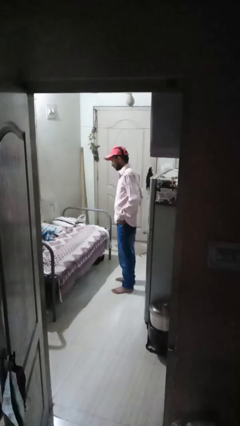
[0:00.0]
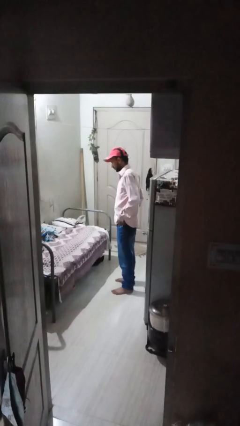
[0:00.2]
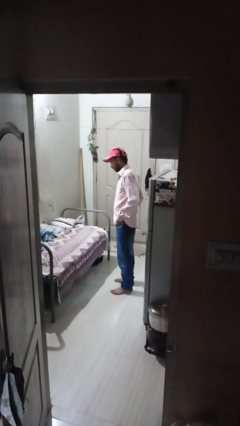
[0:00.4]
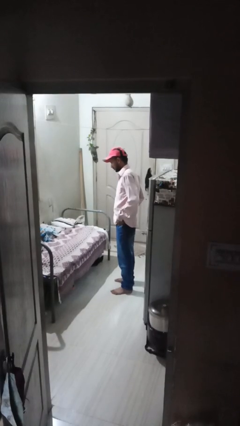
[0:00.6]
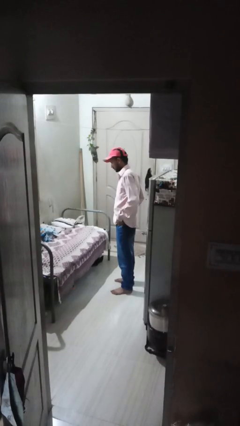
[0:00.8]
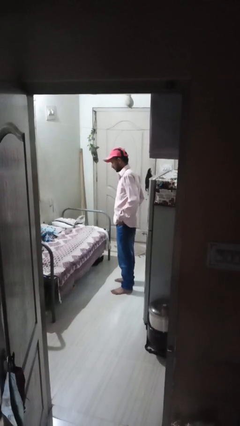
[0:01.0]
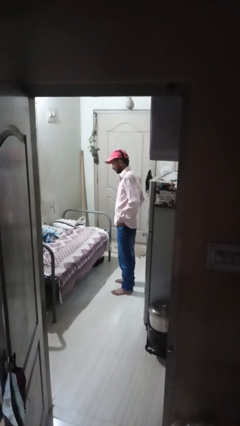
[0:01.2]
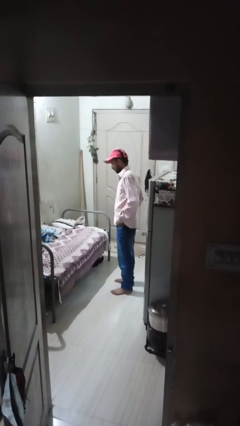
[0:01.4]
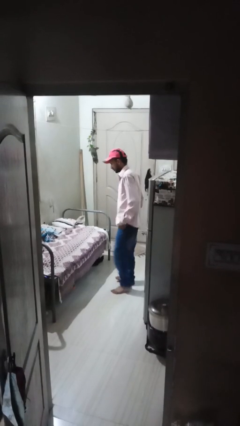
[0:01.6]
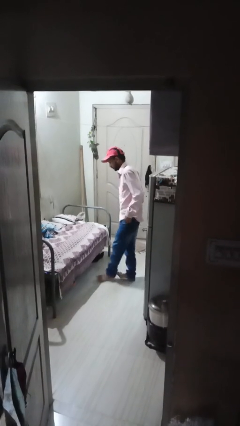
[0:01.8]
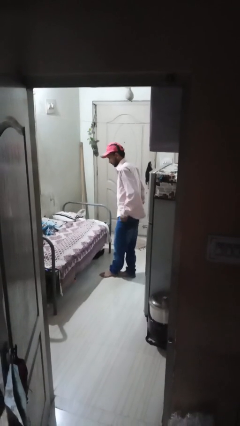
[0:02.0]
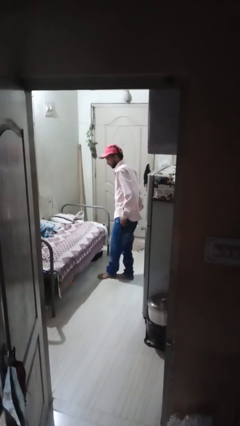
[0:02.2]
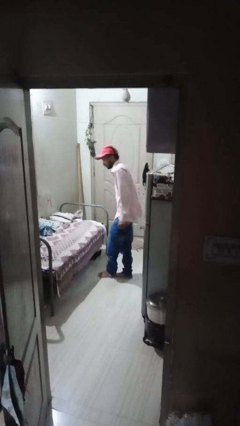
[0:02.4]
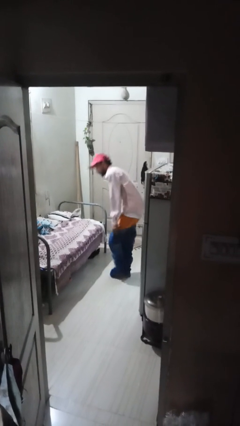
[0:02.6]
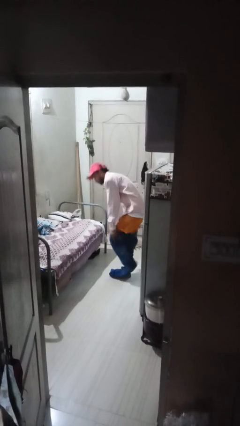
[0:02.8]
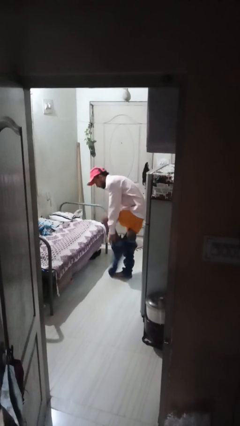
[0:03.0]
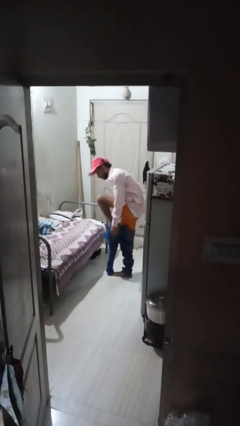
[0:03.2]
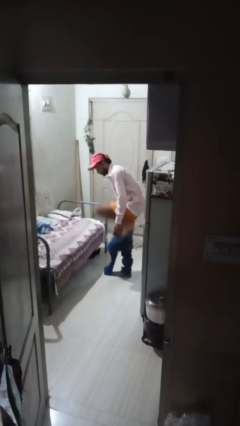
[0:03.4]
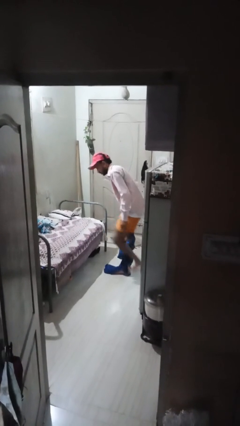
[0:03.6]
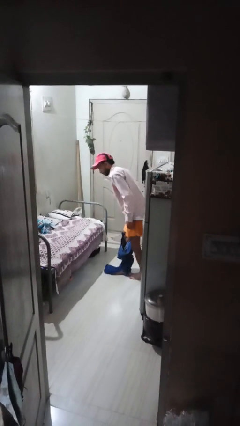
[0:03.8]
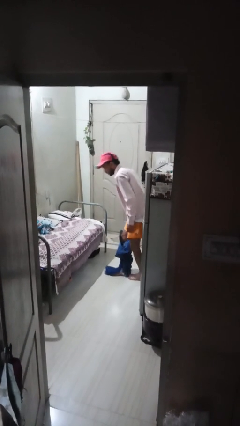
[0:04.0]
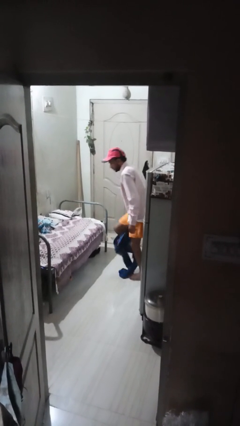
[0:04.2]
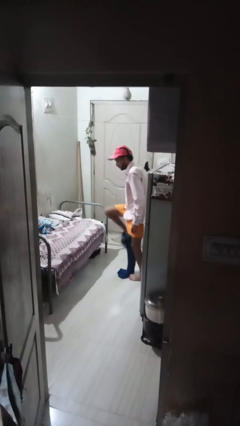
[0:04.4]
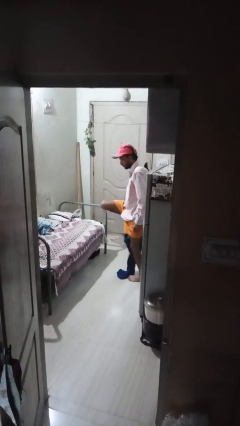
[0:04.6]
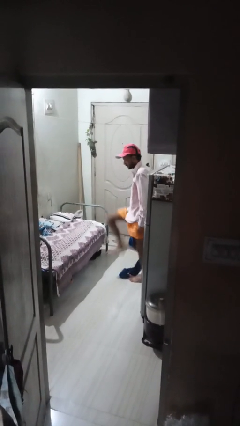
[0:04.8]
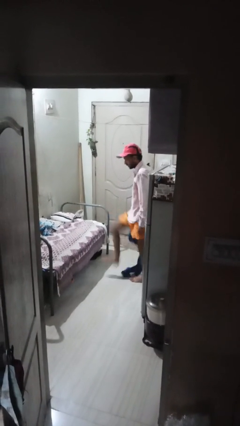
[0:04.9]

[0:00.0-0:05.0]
person takes off pants

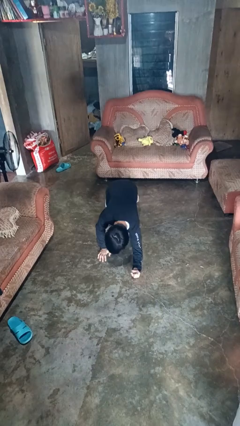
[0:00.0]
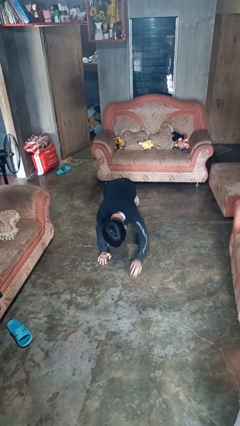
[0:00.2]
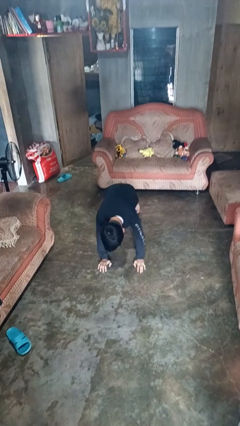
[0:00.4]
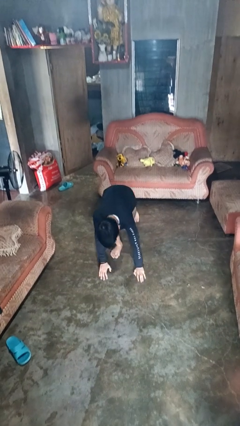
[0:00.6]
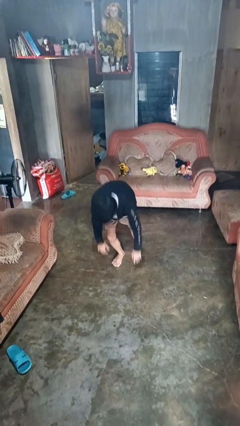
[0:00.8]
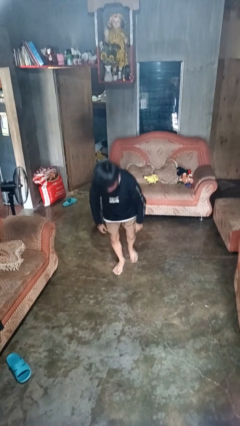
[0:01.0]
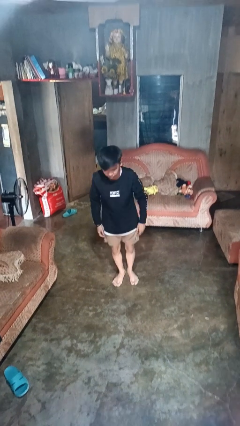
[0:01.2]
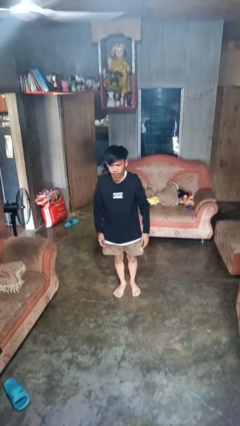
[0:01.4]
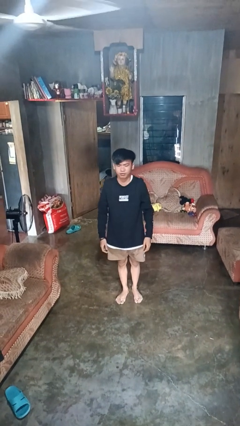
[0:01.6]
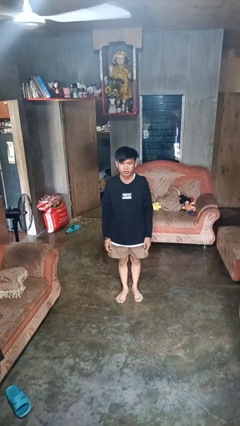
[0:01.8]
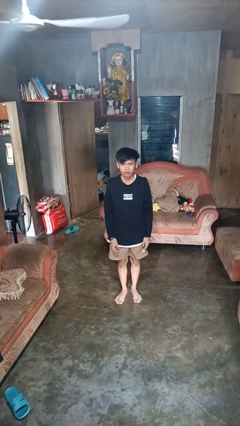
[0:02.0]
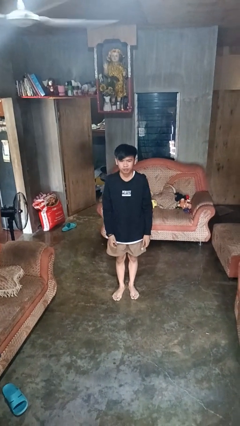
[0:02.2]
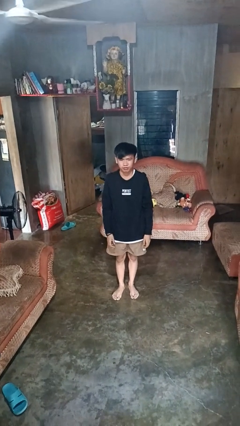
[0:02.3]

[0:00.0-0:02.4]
person stands up from floor

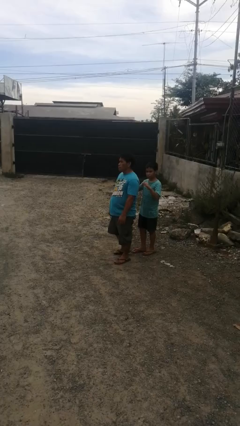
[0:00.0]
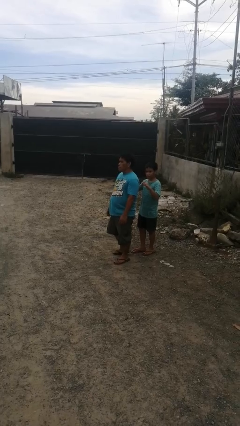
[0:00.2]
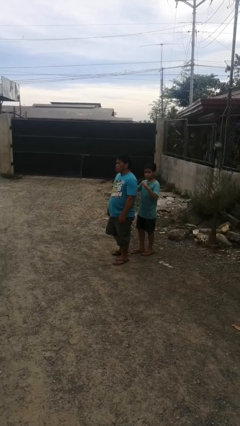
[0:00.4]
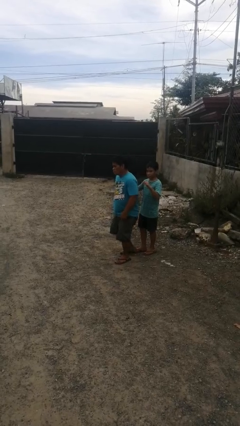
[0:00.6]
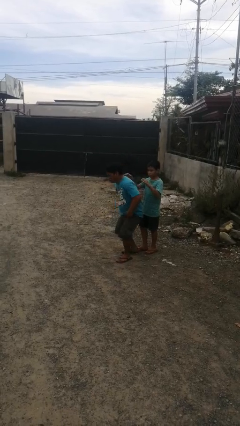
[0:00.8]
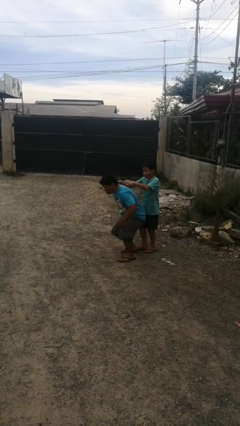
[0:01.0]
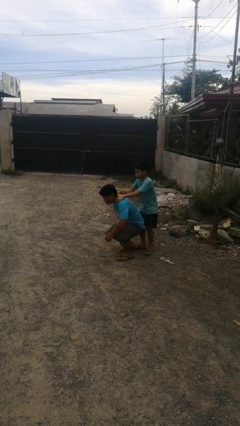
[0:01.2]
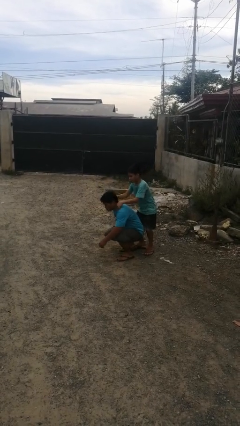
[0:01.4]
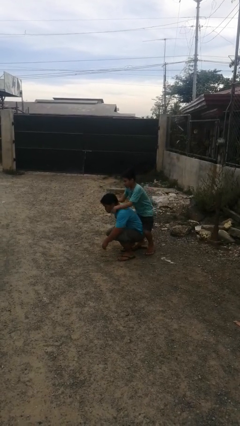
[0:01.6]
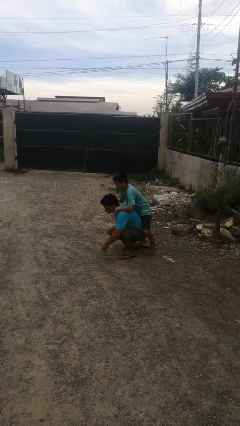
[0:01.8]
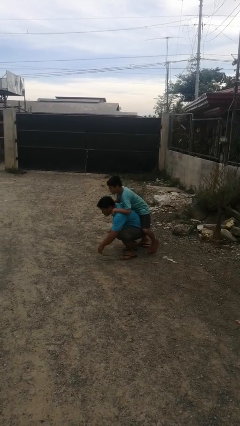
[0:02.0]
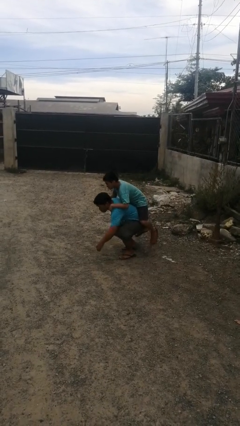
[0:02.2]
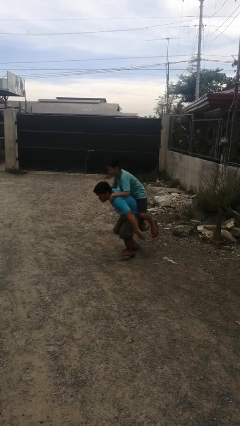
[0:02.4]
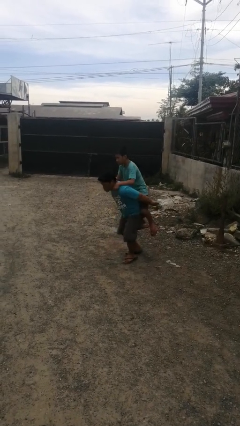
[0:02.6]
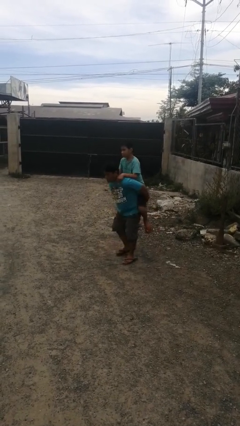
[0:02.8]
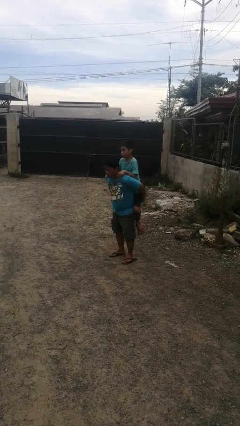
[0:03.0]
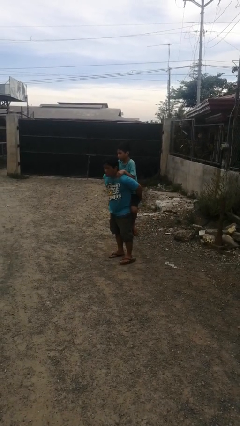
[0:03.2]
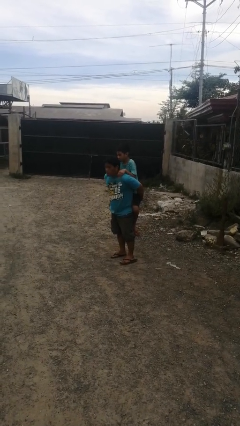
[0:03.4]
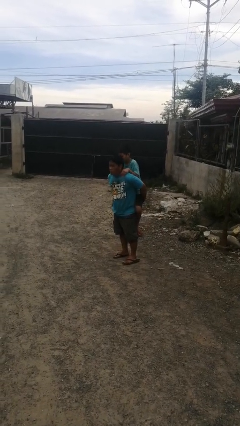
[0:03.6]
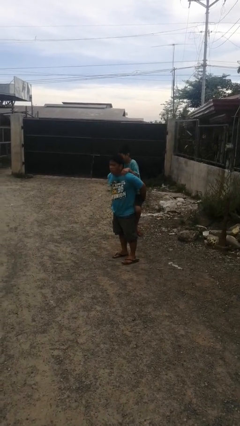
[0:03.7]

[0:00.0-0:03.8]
person carries person over shoulder

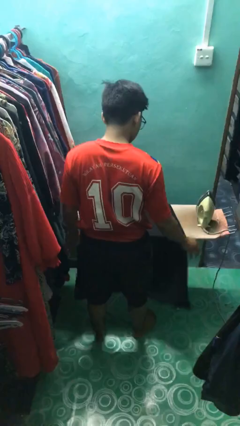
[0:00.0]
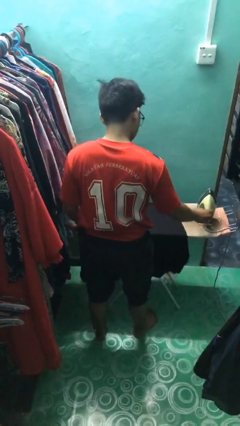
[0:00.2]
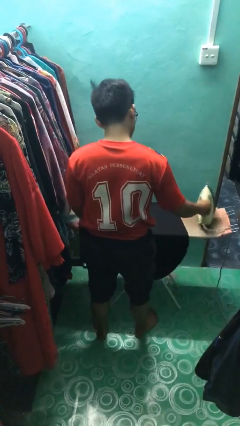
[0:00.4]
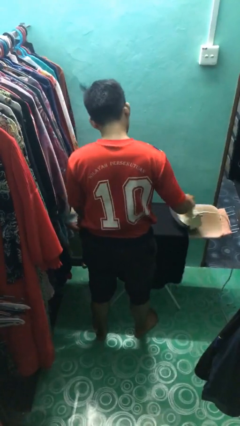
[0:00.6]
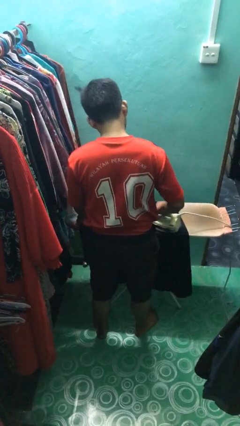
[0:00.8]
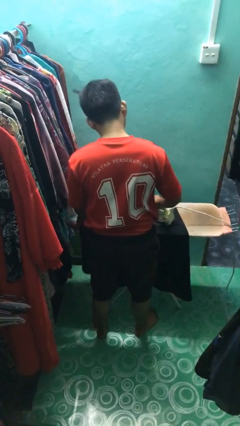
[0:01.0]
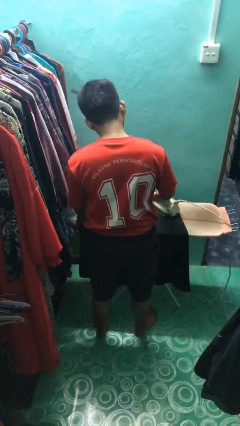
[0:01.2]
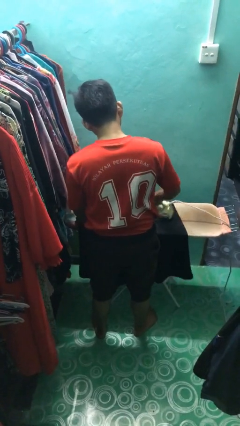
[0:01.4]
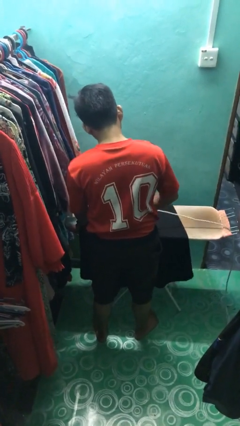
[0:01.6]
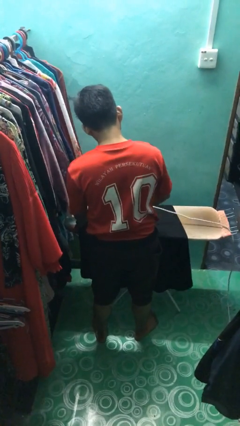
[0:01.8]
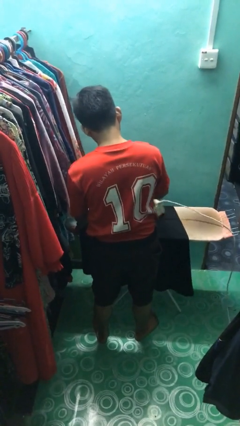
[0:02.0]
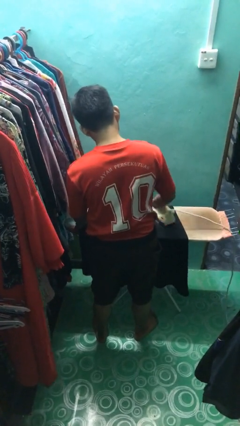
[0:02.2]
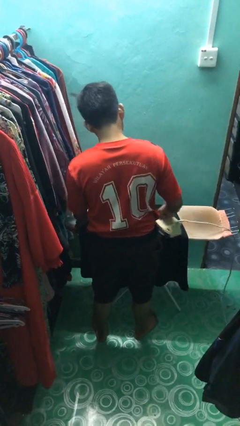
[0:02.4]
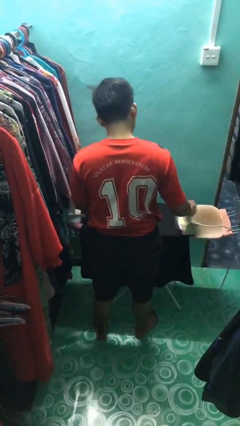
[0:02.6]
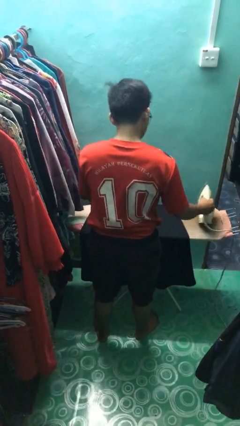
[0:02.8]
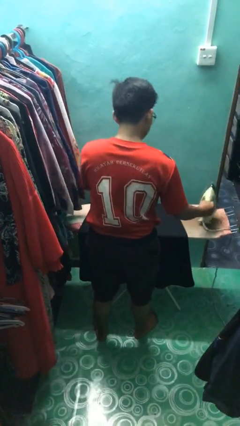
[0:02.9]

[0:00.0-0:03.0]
person irons clothes

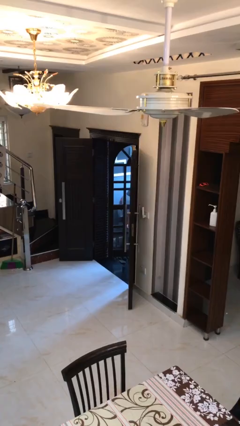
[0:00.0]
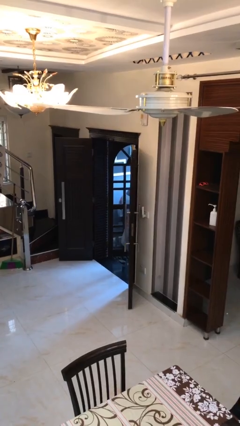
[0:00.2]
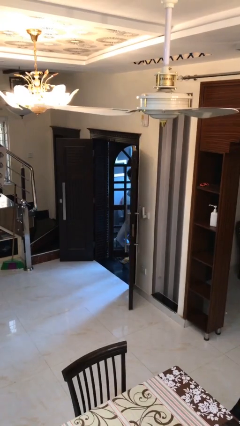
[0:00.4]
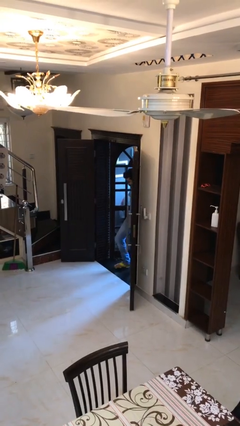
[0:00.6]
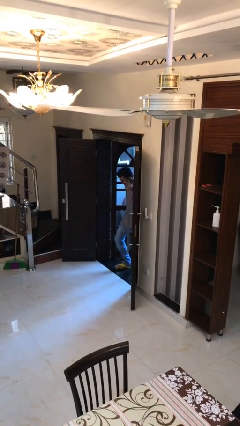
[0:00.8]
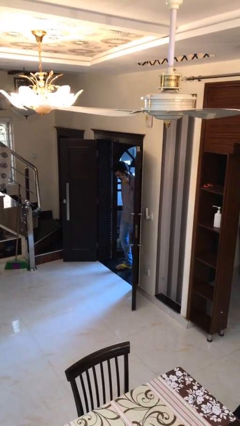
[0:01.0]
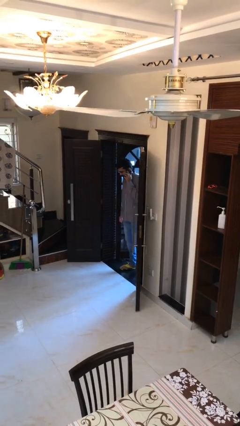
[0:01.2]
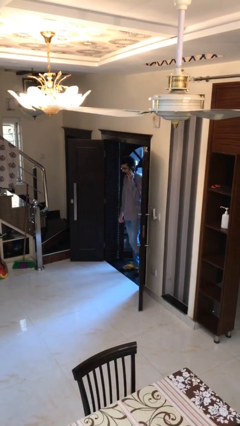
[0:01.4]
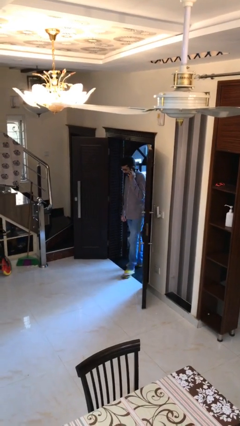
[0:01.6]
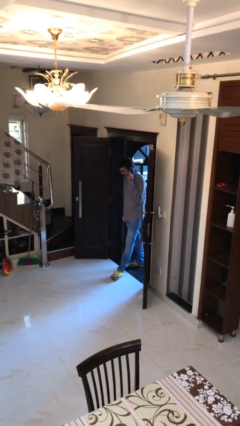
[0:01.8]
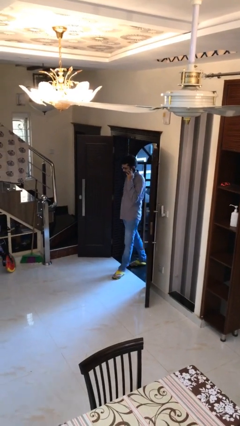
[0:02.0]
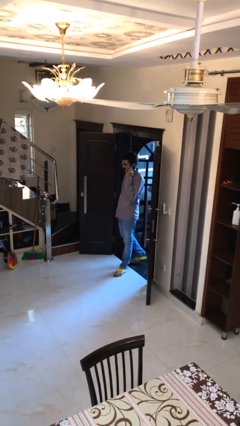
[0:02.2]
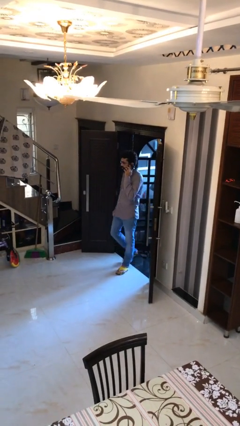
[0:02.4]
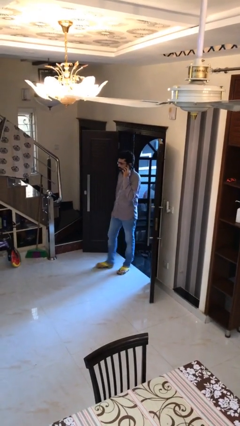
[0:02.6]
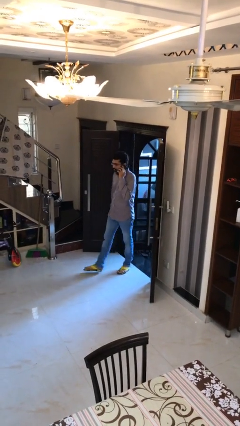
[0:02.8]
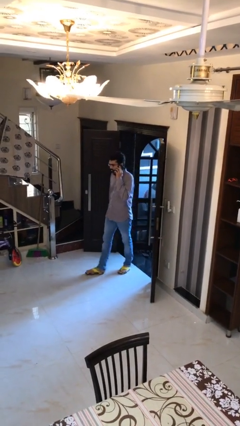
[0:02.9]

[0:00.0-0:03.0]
person enters scene through structure
